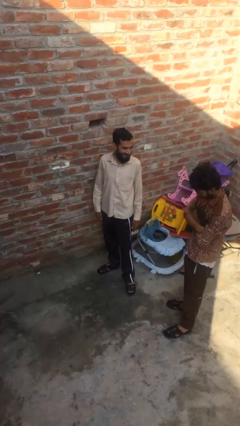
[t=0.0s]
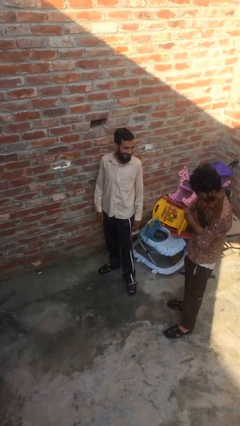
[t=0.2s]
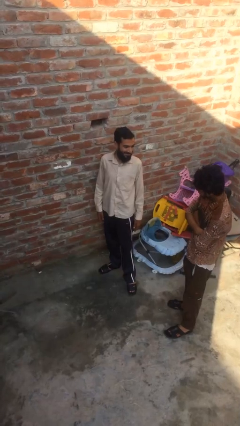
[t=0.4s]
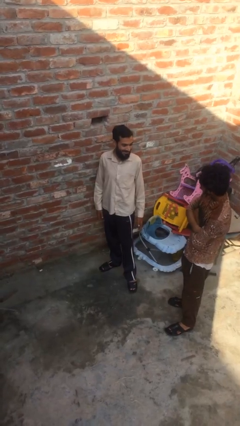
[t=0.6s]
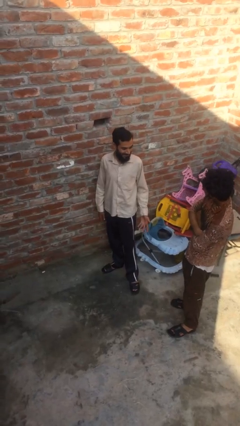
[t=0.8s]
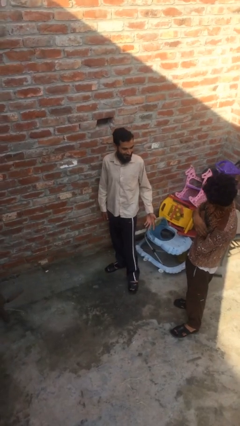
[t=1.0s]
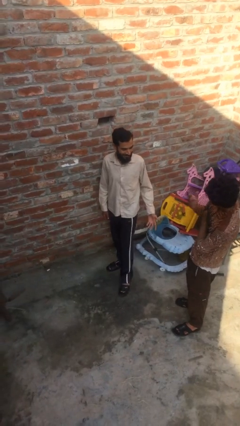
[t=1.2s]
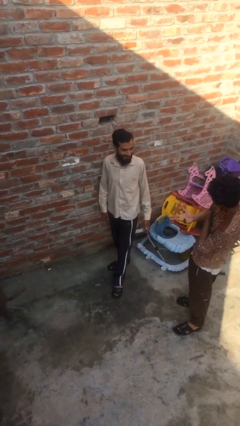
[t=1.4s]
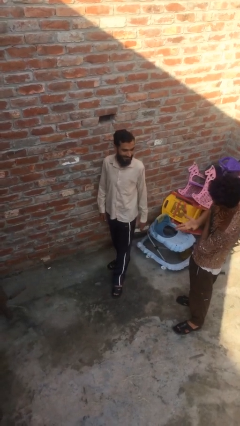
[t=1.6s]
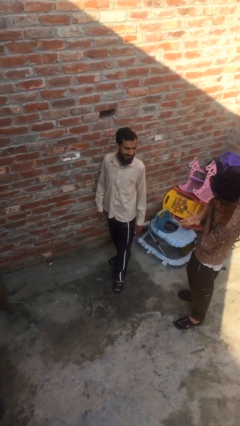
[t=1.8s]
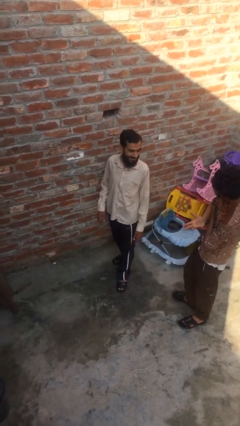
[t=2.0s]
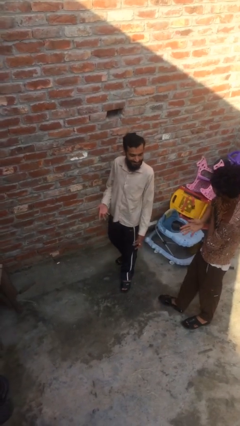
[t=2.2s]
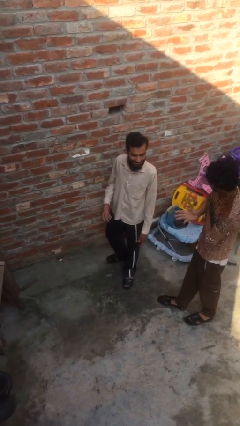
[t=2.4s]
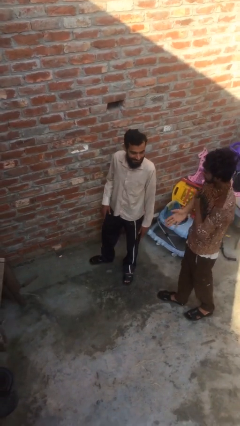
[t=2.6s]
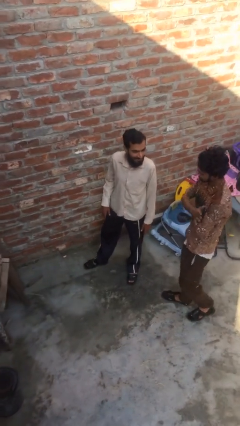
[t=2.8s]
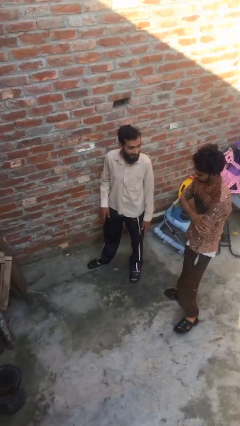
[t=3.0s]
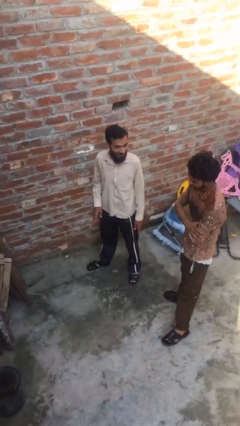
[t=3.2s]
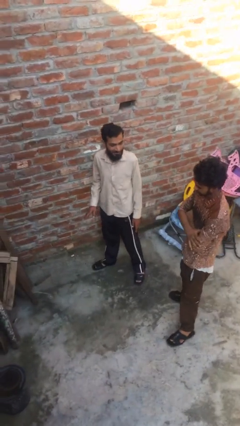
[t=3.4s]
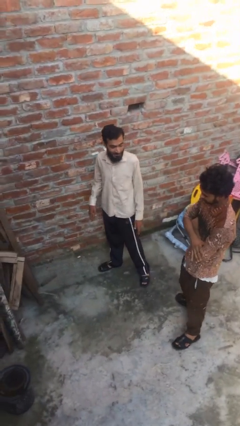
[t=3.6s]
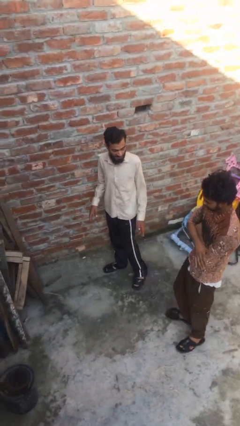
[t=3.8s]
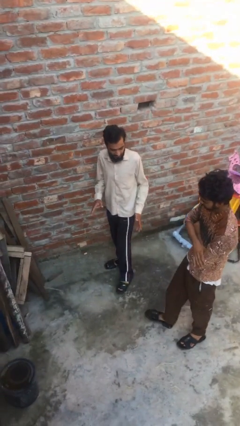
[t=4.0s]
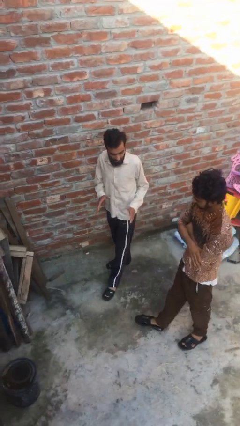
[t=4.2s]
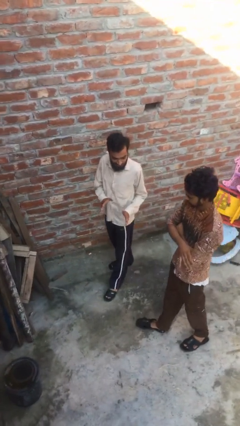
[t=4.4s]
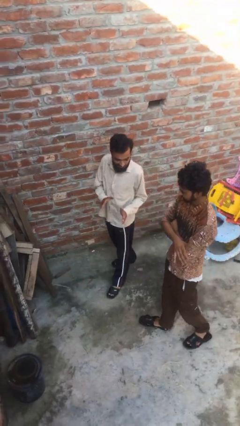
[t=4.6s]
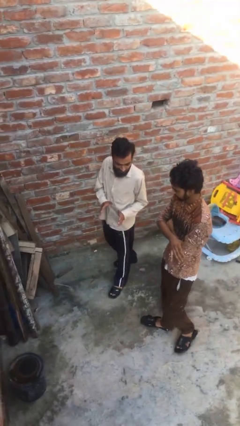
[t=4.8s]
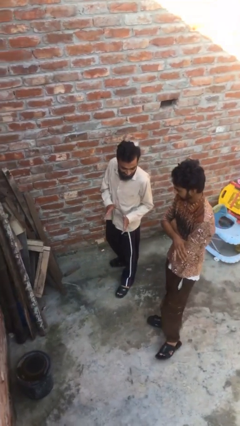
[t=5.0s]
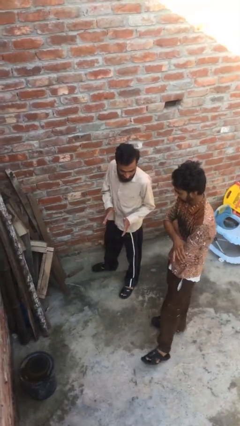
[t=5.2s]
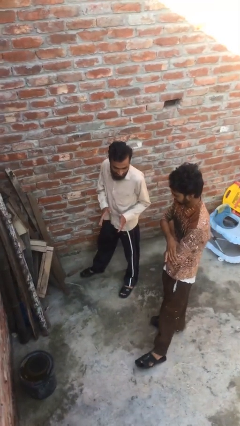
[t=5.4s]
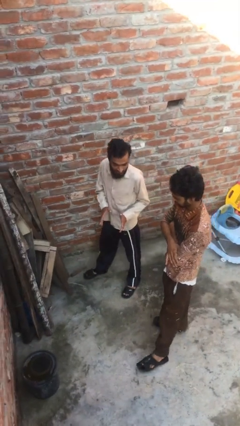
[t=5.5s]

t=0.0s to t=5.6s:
person talks to person

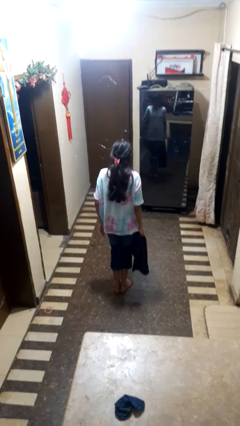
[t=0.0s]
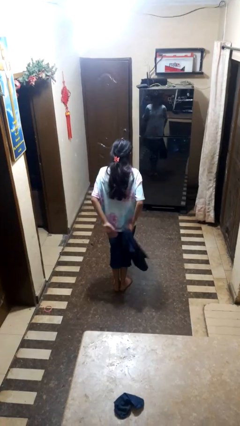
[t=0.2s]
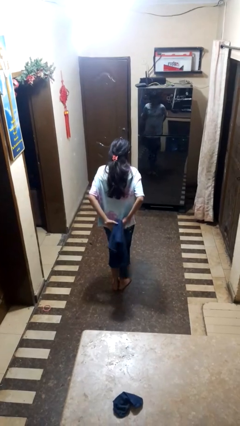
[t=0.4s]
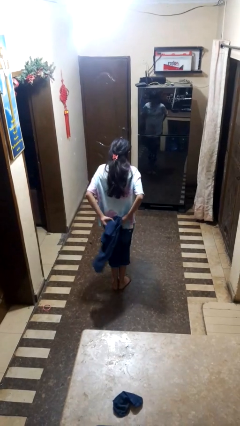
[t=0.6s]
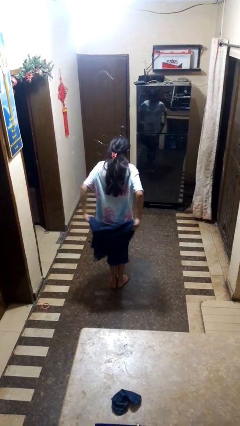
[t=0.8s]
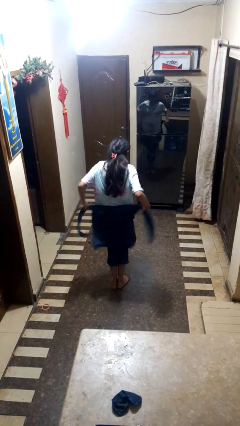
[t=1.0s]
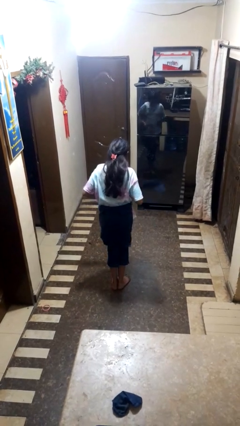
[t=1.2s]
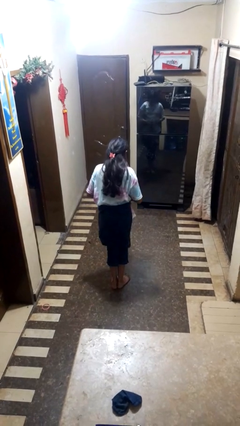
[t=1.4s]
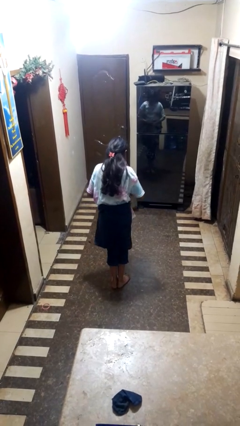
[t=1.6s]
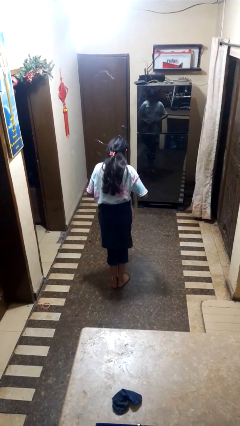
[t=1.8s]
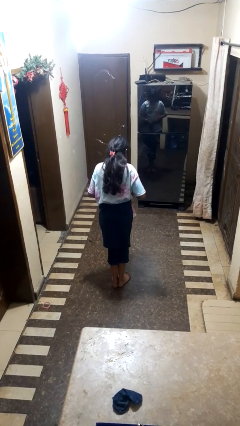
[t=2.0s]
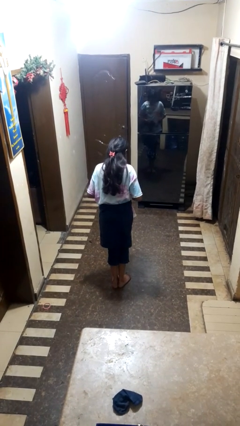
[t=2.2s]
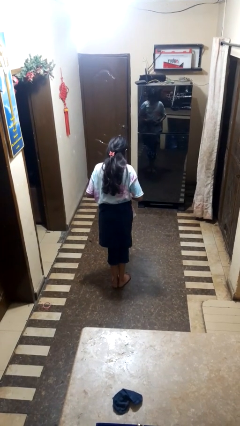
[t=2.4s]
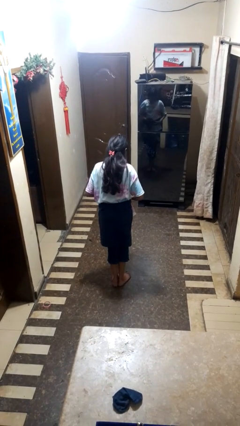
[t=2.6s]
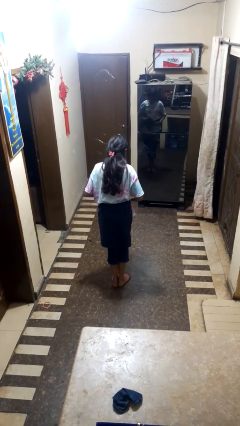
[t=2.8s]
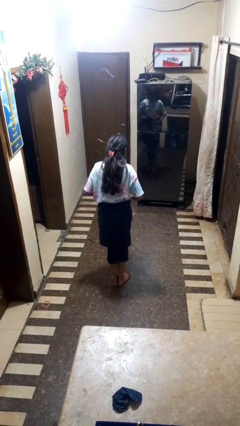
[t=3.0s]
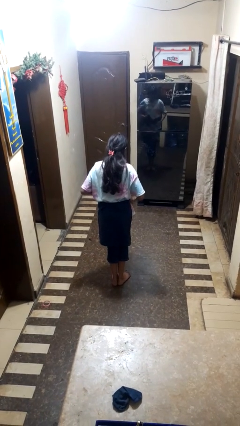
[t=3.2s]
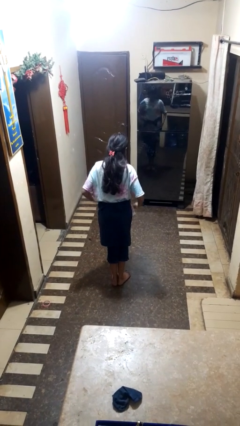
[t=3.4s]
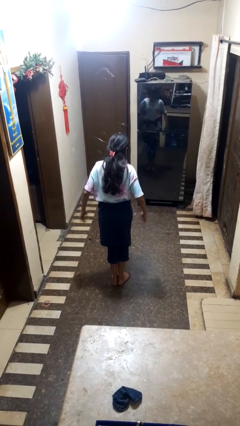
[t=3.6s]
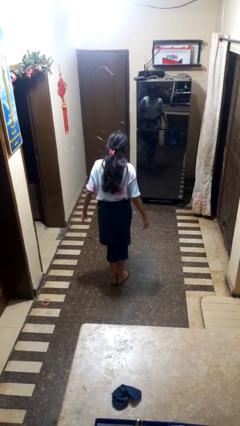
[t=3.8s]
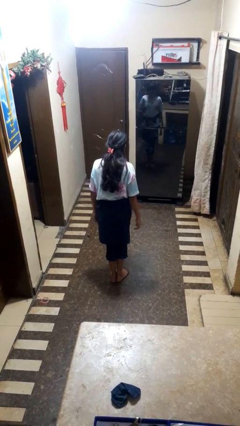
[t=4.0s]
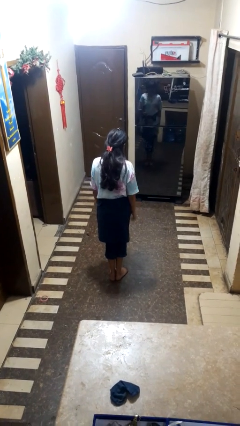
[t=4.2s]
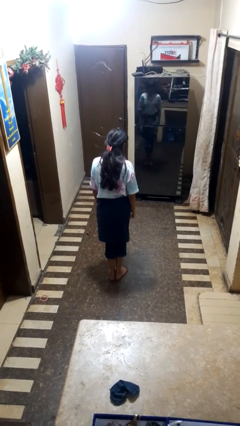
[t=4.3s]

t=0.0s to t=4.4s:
person ties jacket around waist

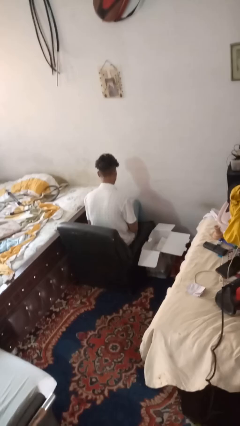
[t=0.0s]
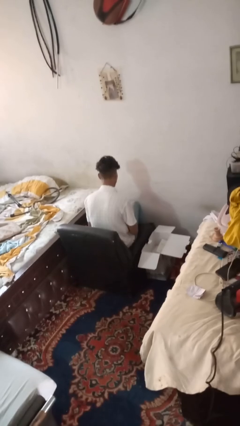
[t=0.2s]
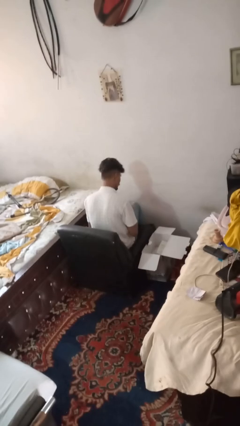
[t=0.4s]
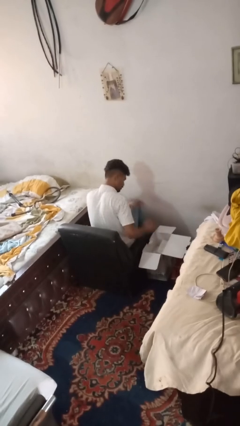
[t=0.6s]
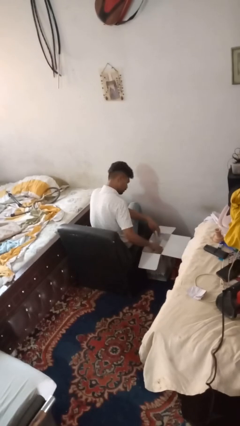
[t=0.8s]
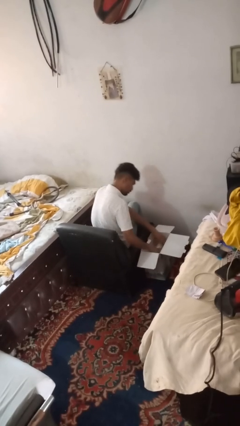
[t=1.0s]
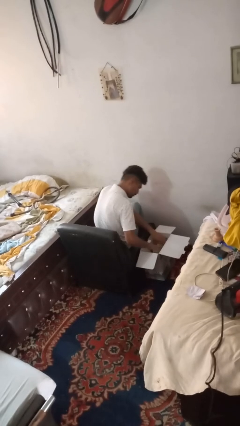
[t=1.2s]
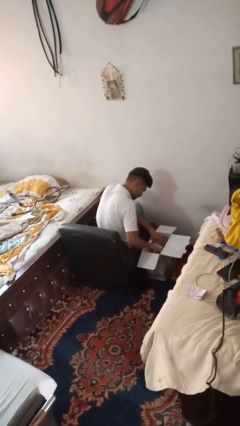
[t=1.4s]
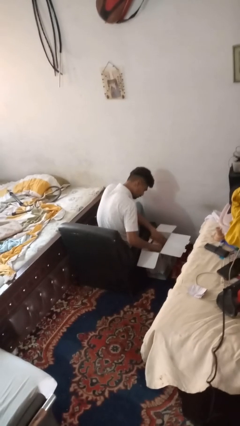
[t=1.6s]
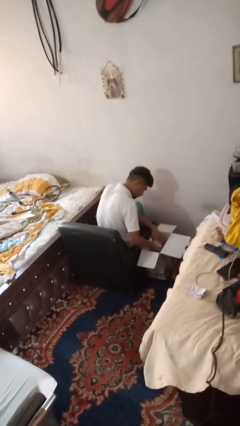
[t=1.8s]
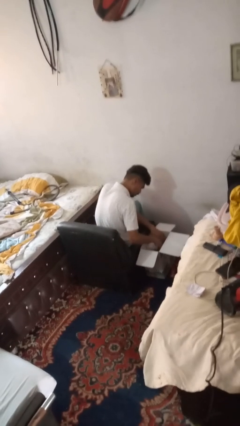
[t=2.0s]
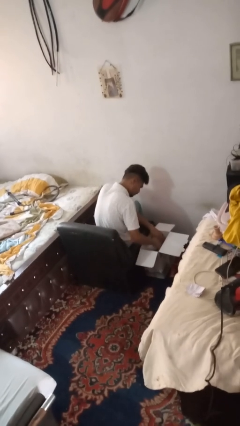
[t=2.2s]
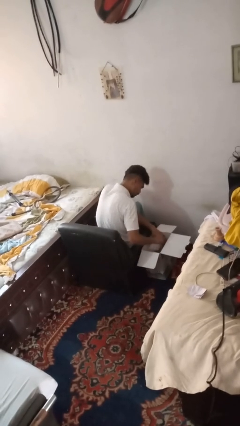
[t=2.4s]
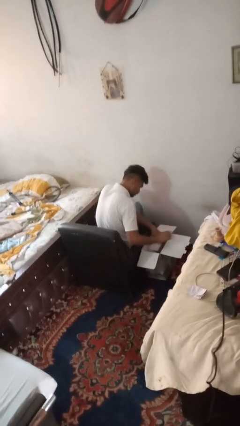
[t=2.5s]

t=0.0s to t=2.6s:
person searches in box

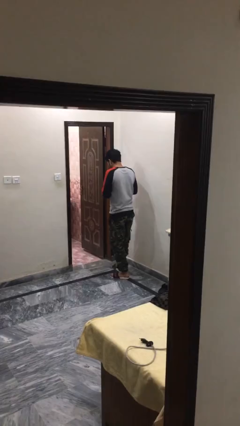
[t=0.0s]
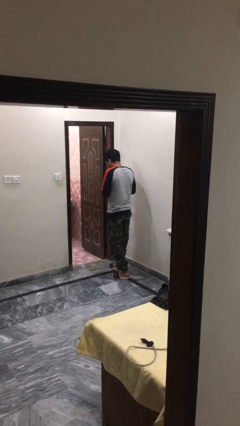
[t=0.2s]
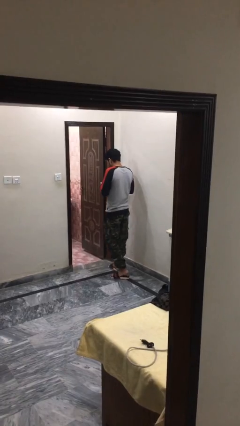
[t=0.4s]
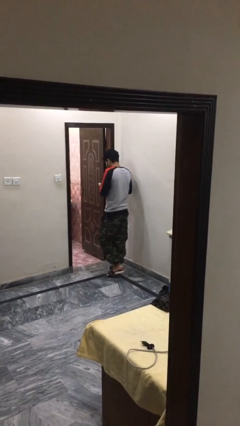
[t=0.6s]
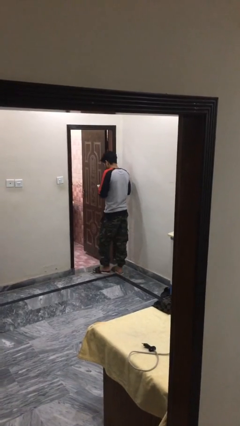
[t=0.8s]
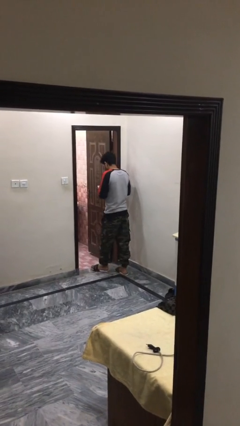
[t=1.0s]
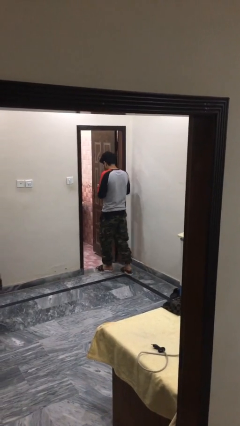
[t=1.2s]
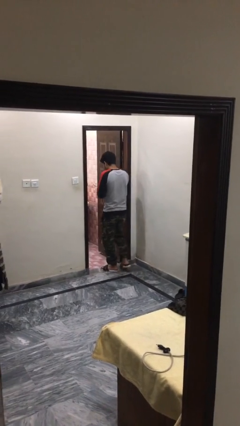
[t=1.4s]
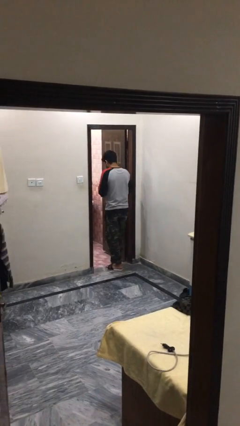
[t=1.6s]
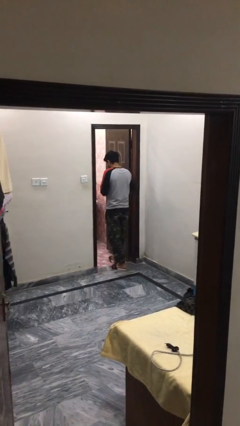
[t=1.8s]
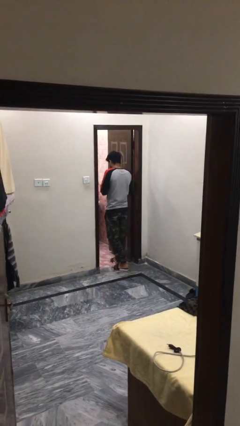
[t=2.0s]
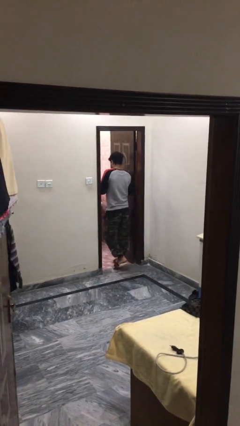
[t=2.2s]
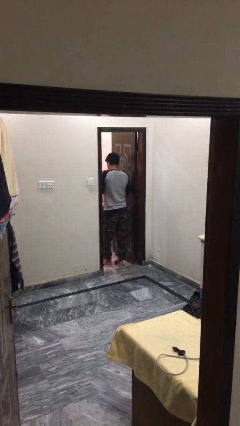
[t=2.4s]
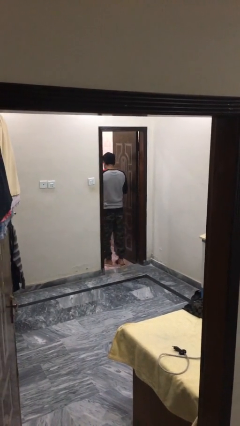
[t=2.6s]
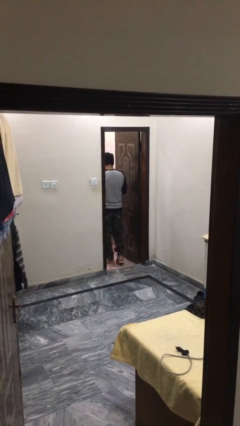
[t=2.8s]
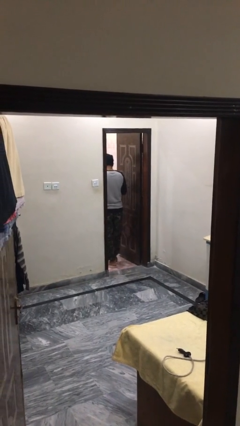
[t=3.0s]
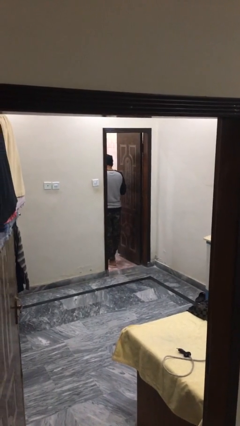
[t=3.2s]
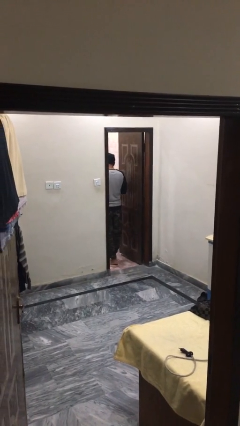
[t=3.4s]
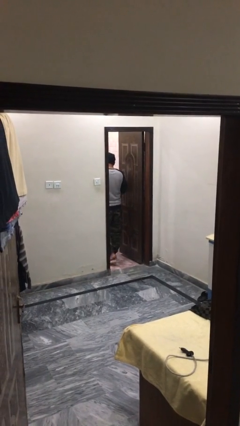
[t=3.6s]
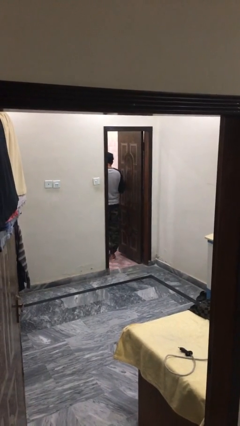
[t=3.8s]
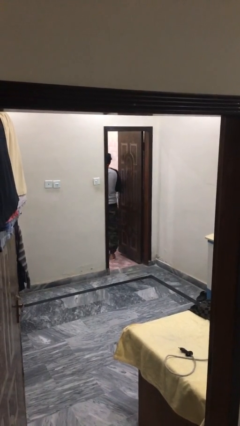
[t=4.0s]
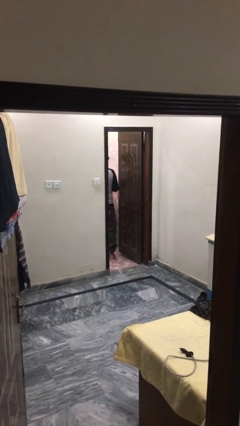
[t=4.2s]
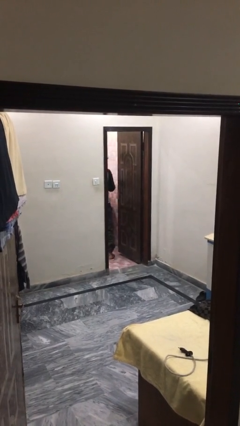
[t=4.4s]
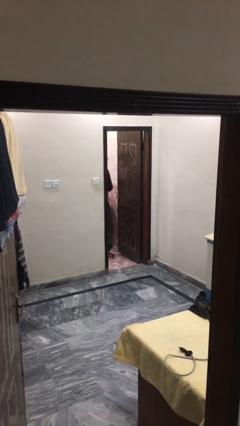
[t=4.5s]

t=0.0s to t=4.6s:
person enters scene through structure

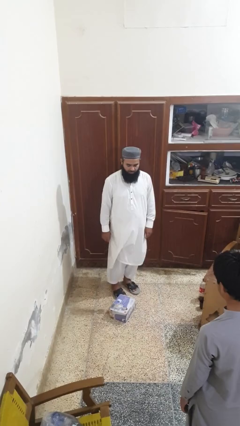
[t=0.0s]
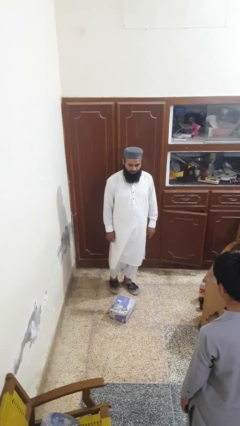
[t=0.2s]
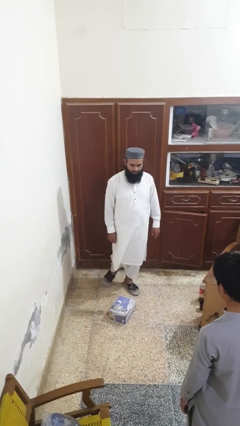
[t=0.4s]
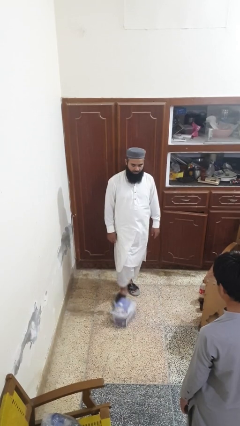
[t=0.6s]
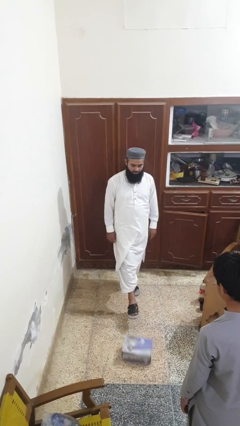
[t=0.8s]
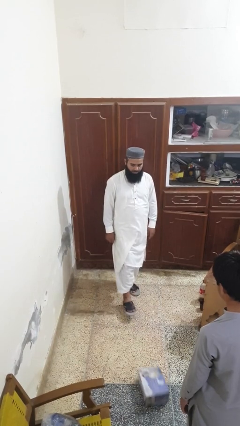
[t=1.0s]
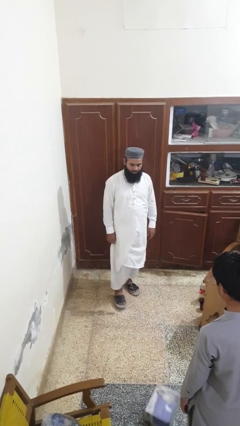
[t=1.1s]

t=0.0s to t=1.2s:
person kicks object to person
